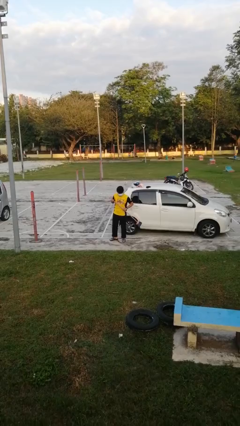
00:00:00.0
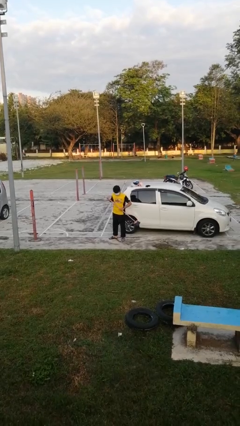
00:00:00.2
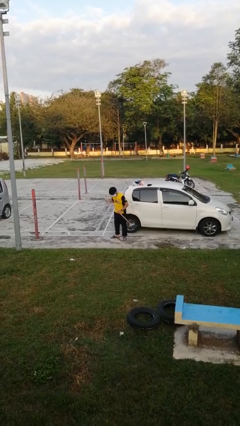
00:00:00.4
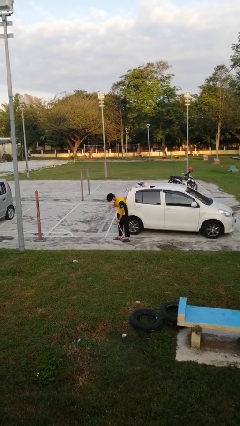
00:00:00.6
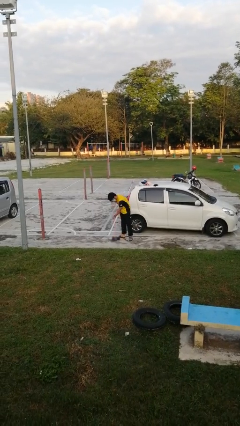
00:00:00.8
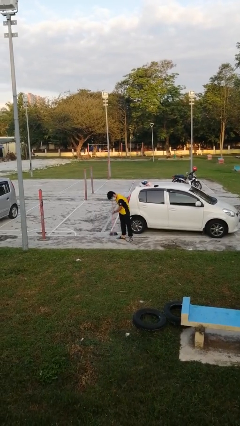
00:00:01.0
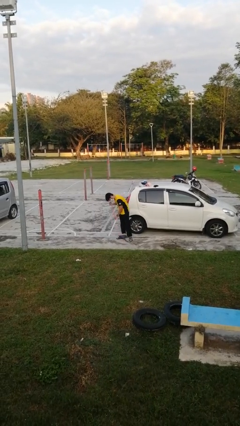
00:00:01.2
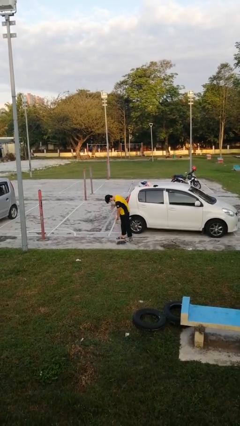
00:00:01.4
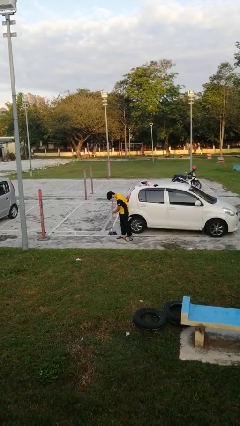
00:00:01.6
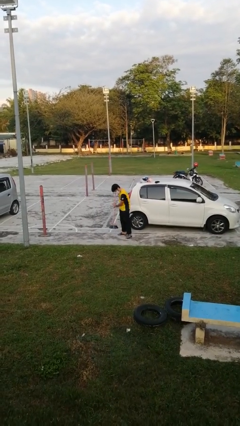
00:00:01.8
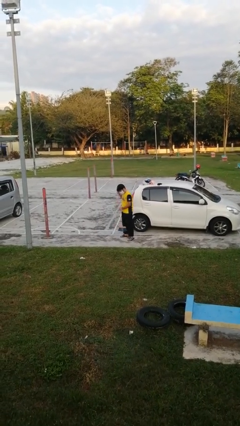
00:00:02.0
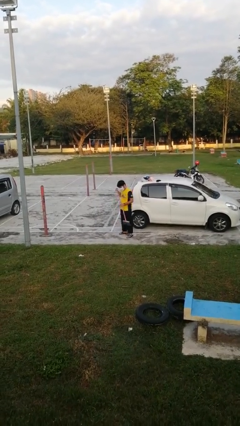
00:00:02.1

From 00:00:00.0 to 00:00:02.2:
person sweeps floor

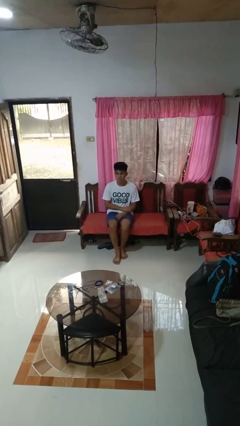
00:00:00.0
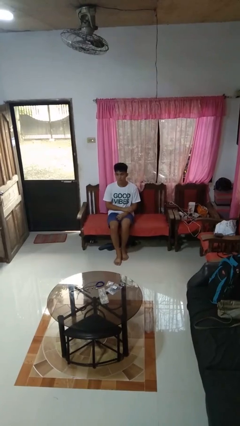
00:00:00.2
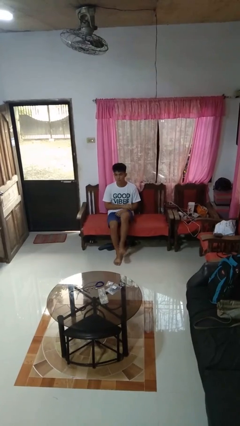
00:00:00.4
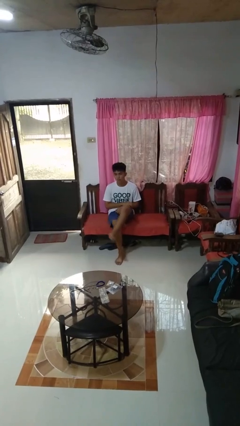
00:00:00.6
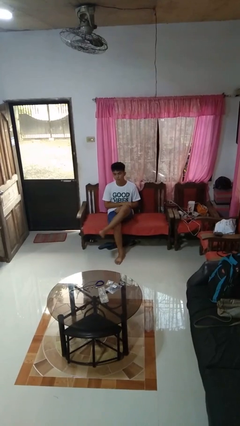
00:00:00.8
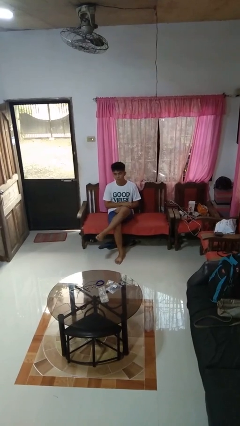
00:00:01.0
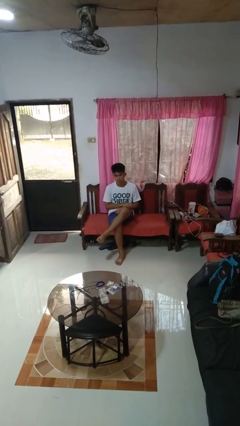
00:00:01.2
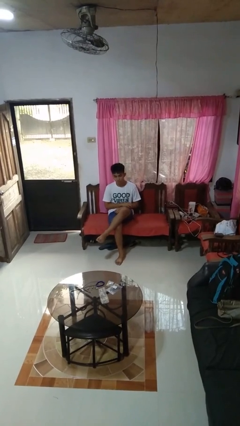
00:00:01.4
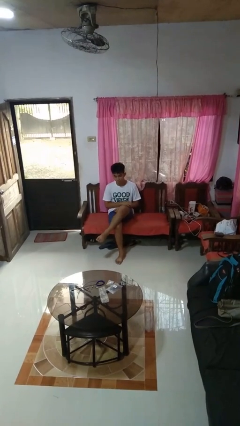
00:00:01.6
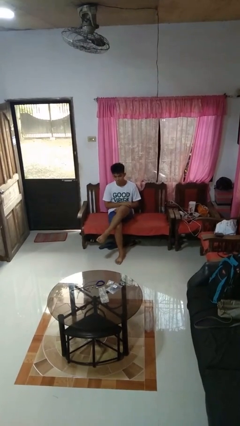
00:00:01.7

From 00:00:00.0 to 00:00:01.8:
person crosses legs

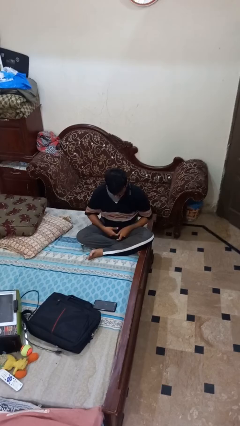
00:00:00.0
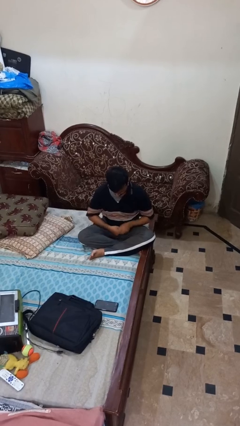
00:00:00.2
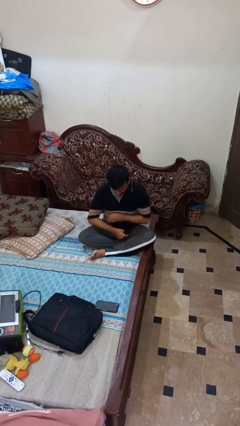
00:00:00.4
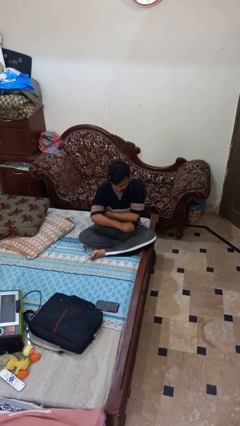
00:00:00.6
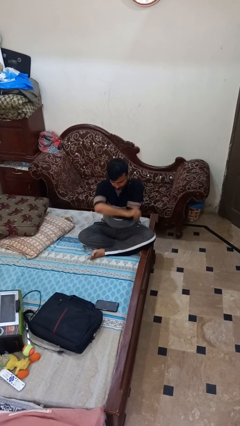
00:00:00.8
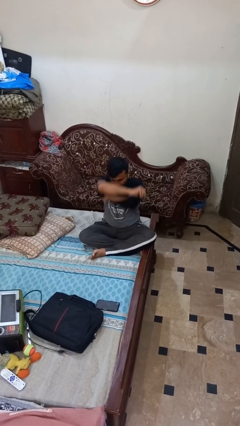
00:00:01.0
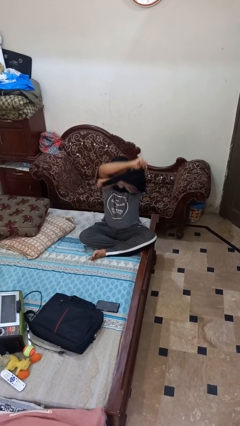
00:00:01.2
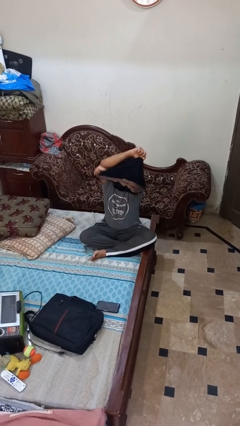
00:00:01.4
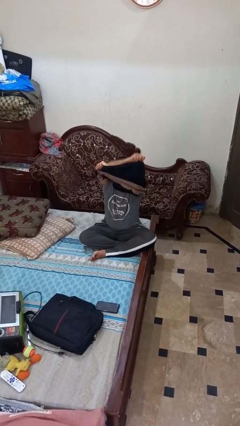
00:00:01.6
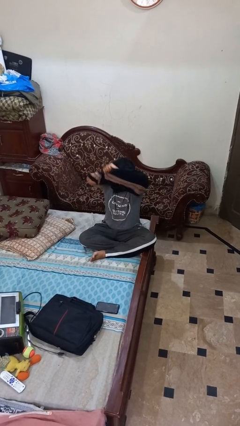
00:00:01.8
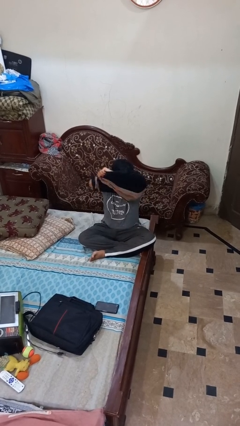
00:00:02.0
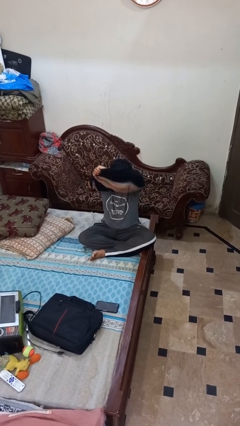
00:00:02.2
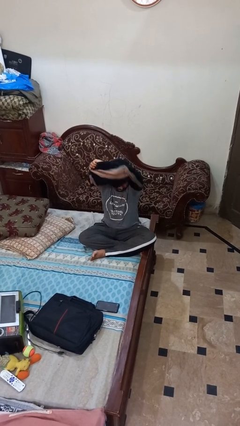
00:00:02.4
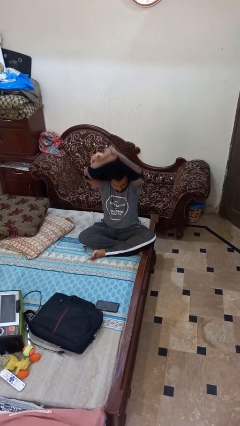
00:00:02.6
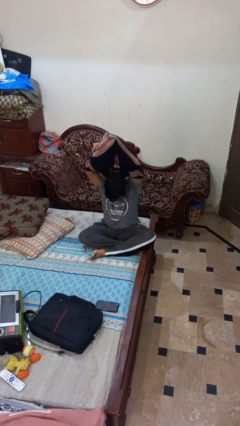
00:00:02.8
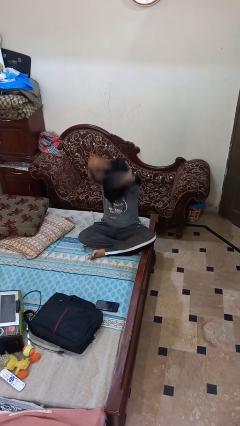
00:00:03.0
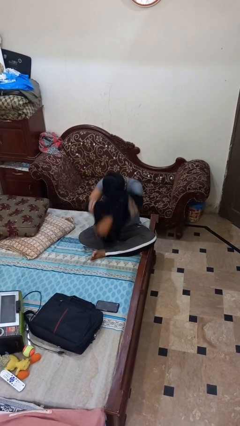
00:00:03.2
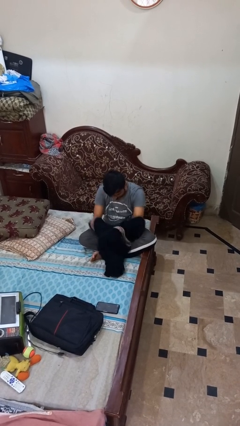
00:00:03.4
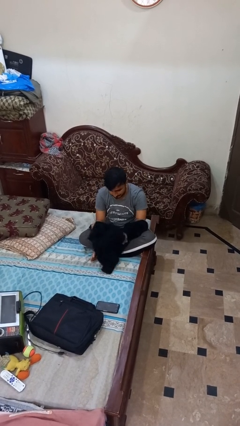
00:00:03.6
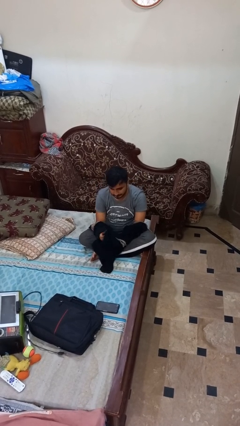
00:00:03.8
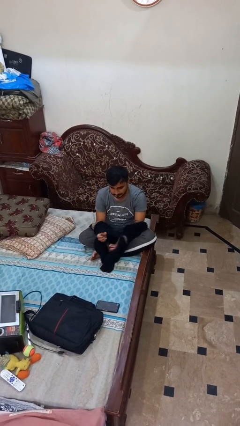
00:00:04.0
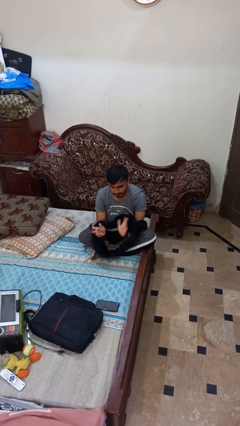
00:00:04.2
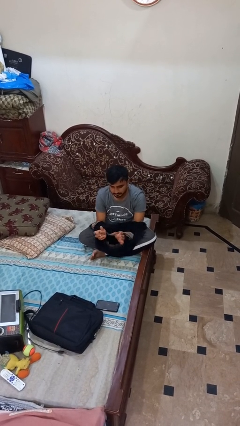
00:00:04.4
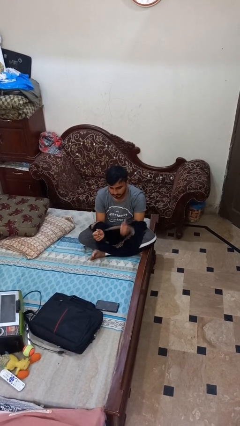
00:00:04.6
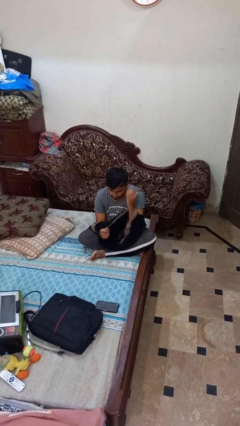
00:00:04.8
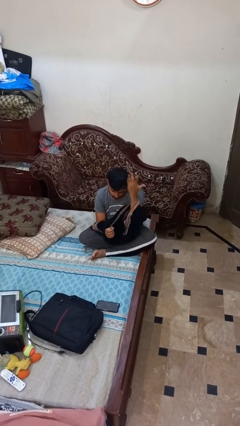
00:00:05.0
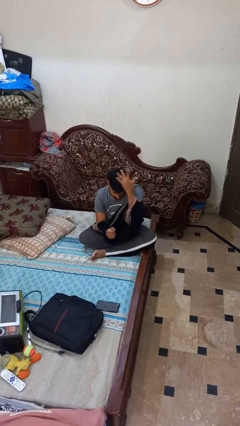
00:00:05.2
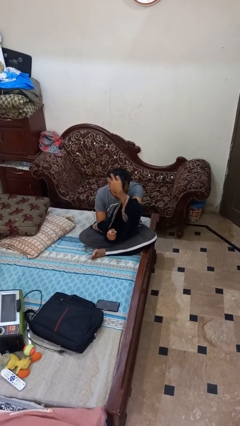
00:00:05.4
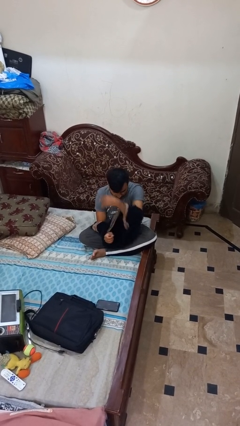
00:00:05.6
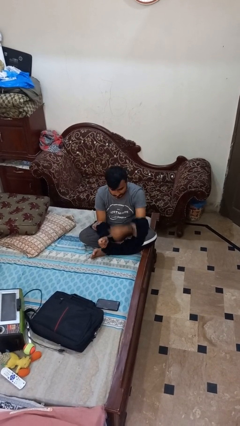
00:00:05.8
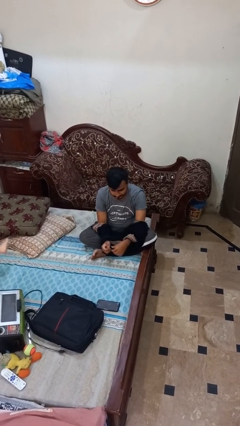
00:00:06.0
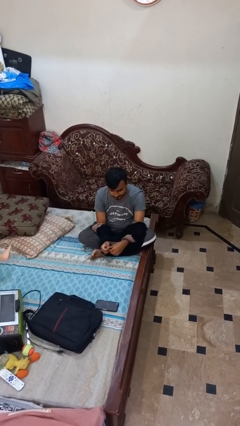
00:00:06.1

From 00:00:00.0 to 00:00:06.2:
person takes off shirt

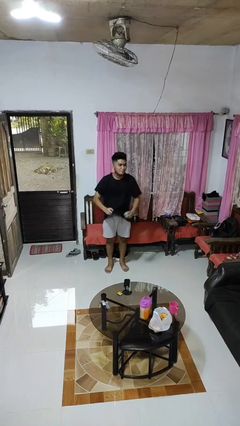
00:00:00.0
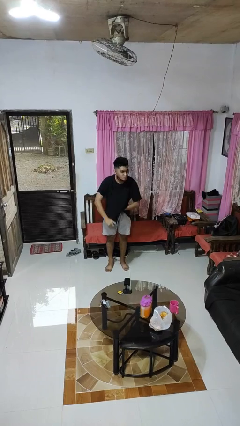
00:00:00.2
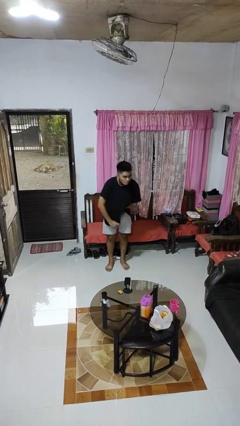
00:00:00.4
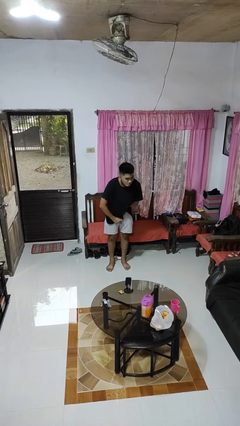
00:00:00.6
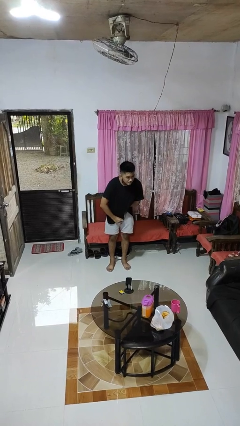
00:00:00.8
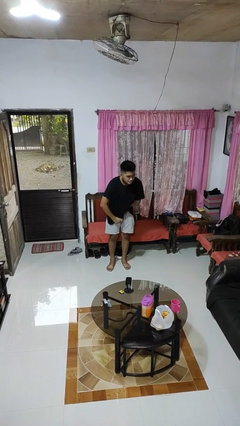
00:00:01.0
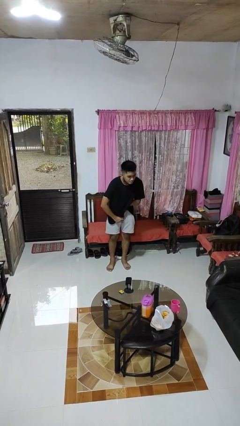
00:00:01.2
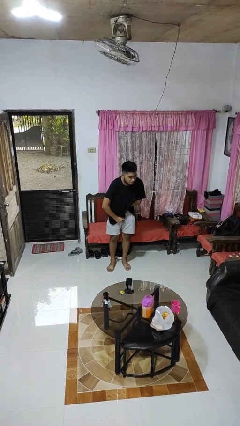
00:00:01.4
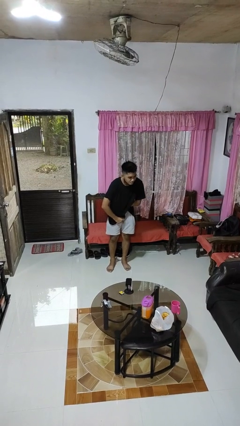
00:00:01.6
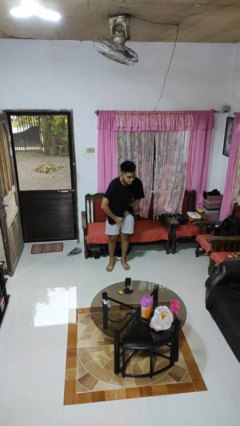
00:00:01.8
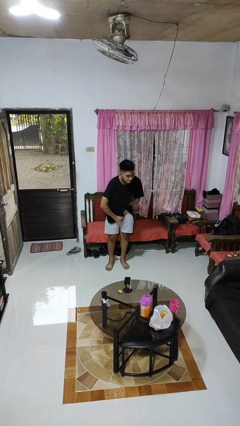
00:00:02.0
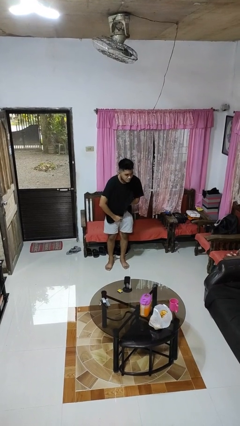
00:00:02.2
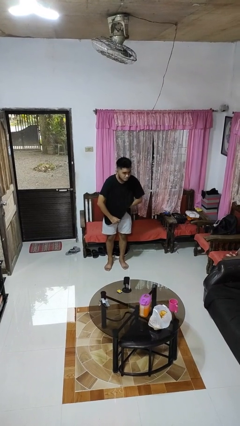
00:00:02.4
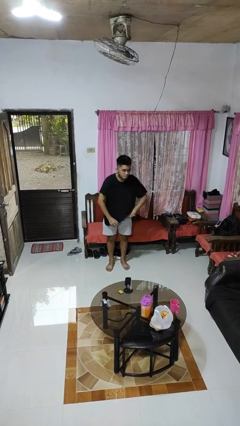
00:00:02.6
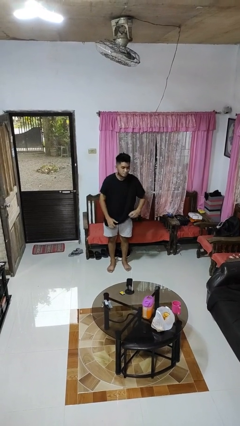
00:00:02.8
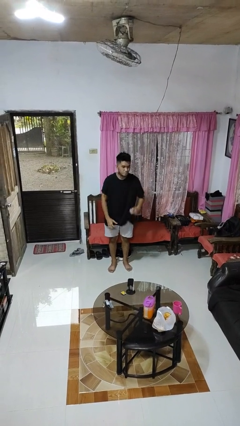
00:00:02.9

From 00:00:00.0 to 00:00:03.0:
person applies deodorant

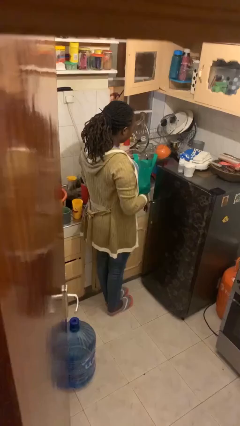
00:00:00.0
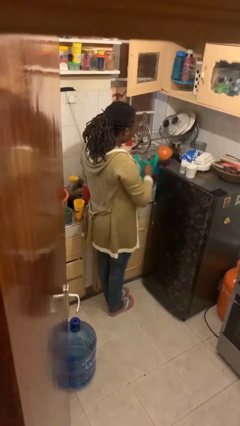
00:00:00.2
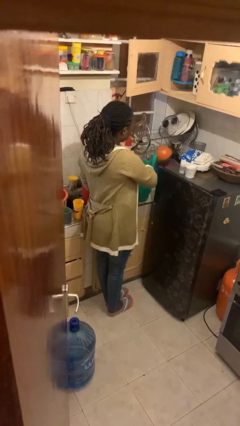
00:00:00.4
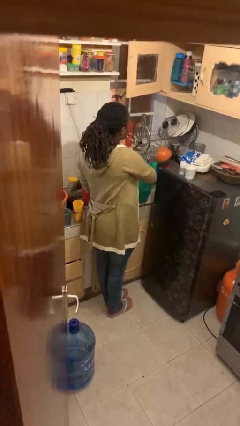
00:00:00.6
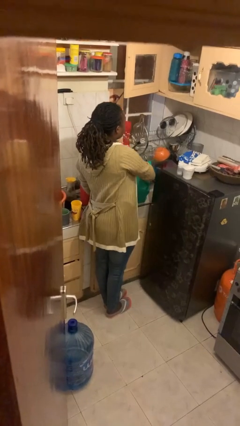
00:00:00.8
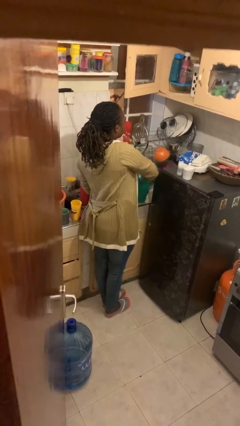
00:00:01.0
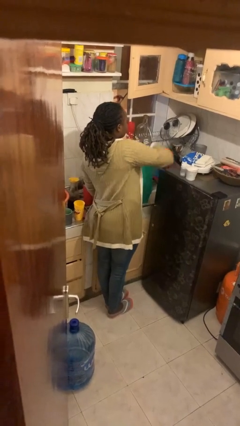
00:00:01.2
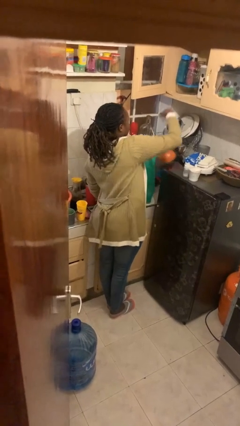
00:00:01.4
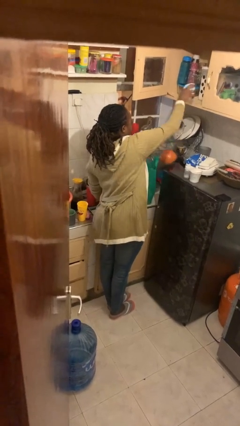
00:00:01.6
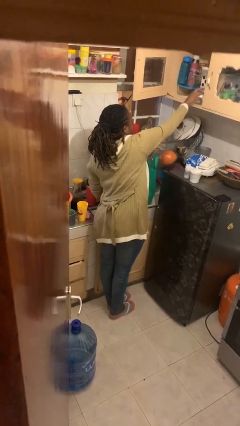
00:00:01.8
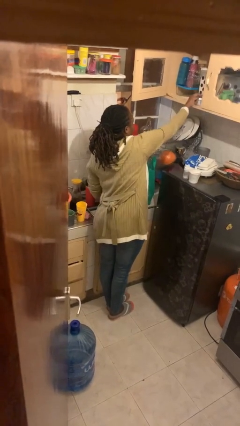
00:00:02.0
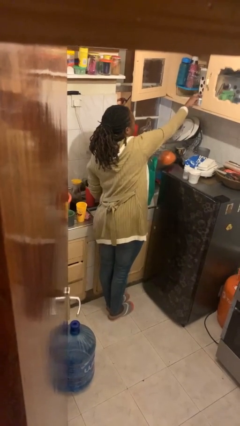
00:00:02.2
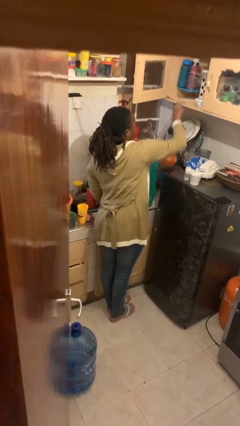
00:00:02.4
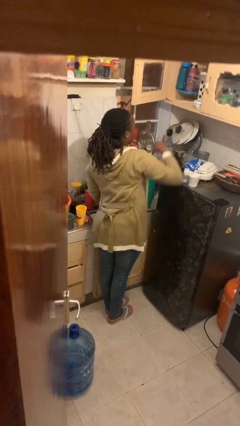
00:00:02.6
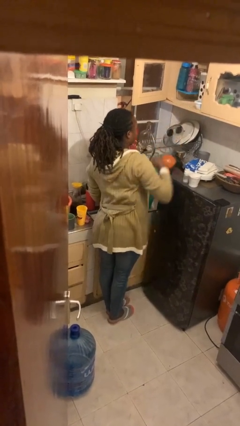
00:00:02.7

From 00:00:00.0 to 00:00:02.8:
person loads groceries into cabinet

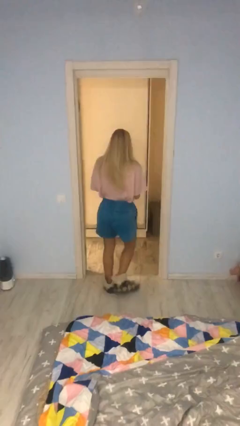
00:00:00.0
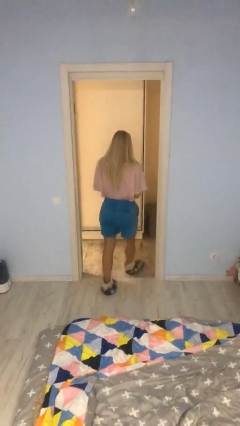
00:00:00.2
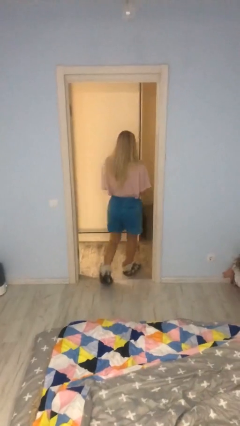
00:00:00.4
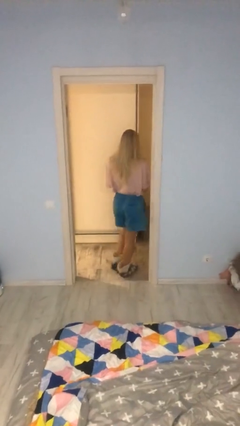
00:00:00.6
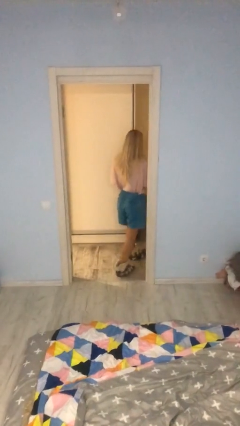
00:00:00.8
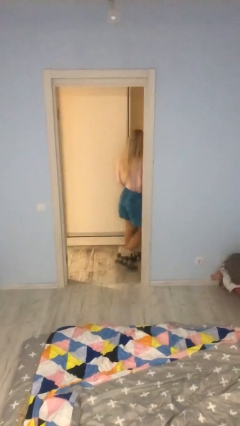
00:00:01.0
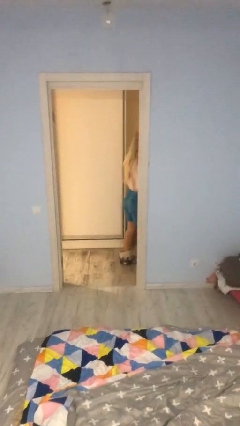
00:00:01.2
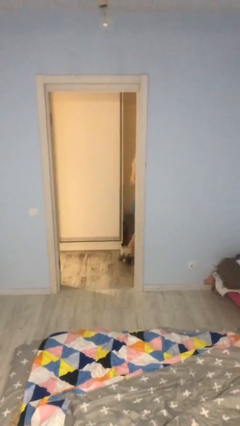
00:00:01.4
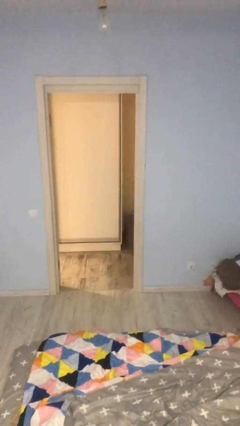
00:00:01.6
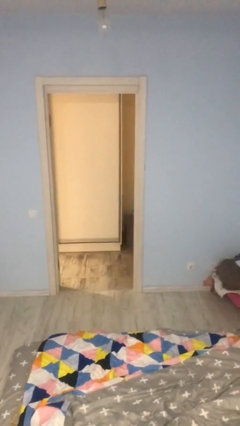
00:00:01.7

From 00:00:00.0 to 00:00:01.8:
person exits scene through structure
